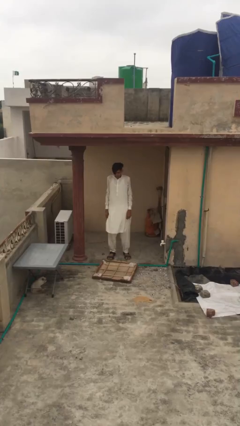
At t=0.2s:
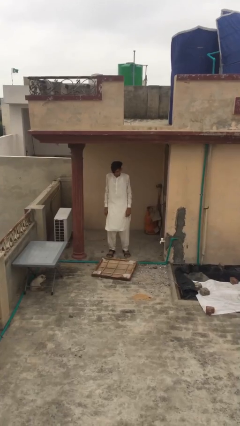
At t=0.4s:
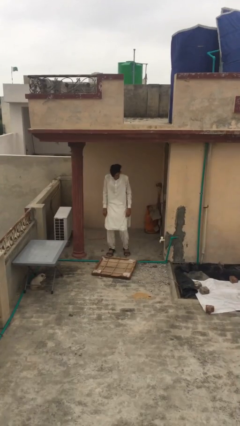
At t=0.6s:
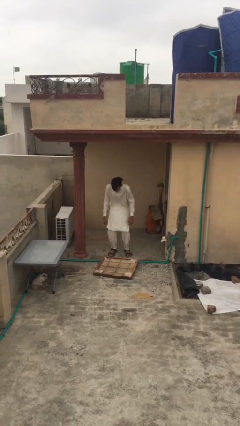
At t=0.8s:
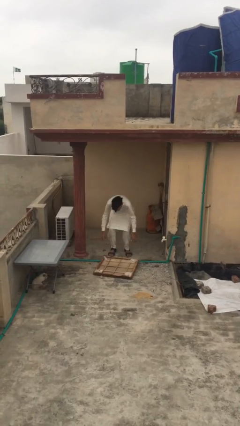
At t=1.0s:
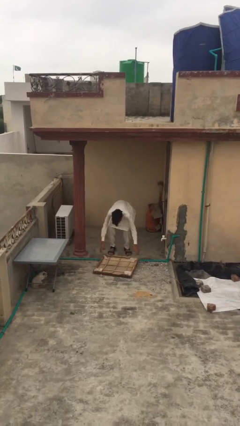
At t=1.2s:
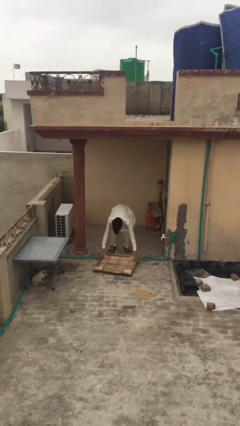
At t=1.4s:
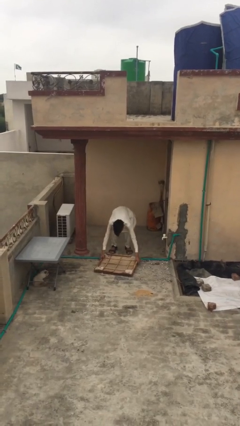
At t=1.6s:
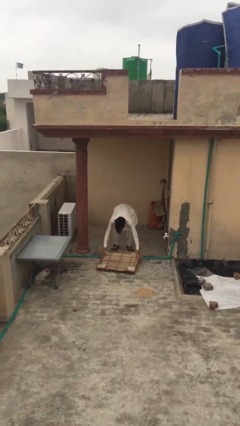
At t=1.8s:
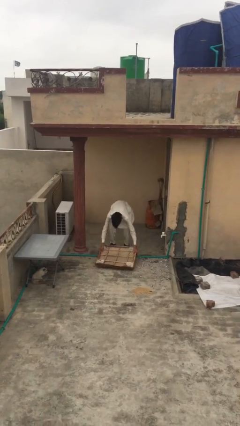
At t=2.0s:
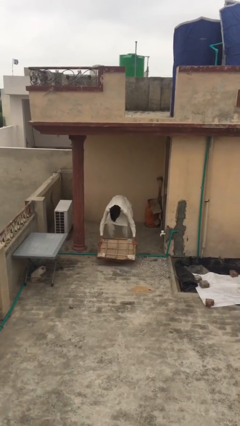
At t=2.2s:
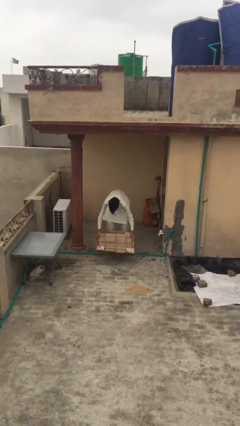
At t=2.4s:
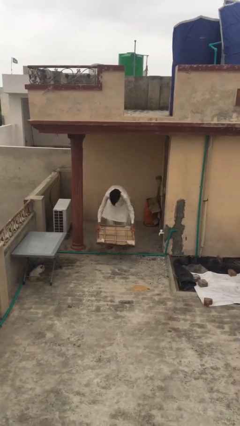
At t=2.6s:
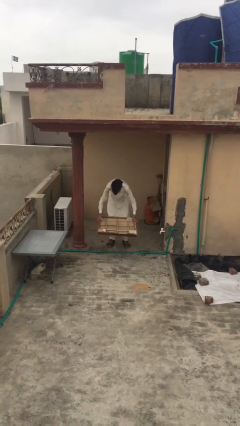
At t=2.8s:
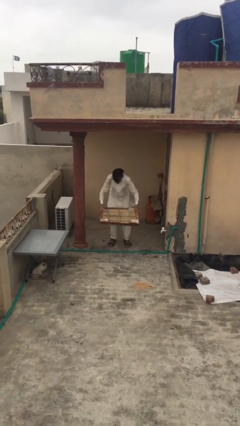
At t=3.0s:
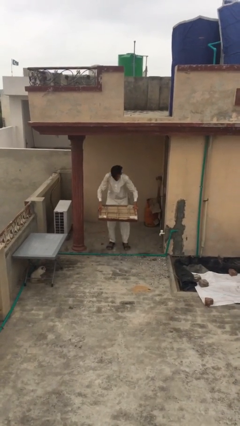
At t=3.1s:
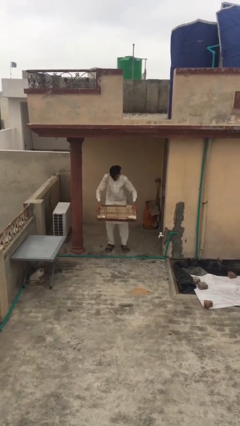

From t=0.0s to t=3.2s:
person picks up object from floor

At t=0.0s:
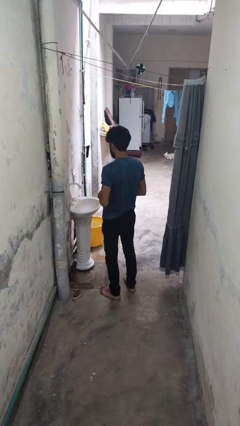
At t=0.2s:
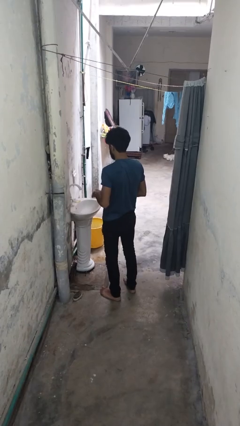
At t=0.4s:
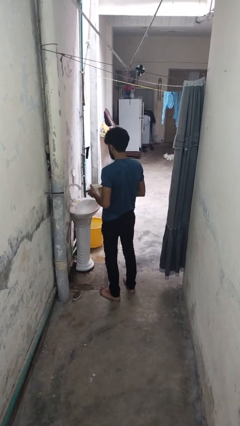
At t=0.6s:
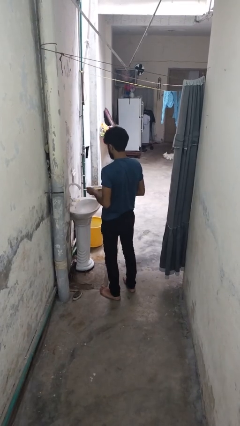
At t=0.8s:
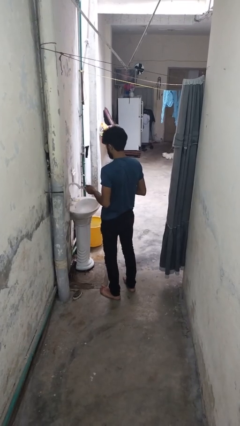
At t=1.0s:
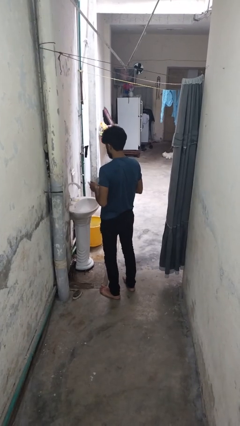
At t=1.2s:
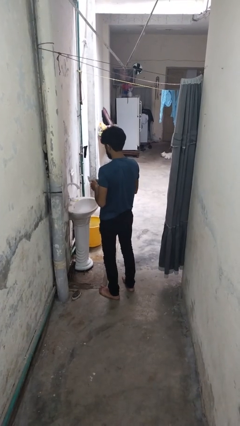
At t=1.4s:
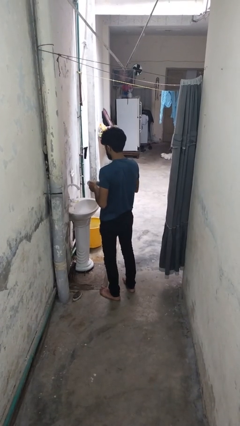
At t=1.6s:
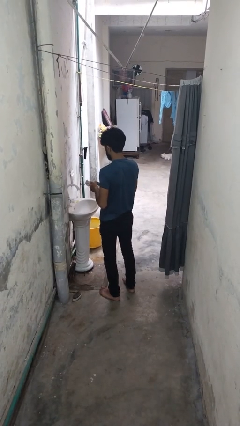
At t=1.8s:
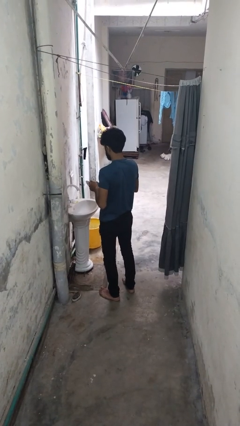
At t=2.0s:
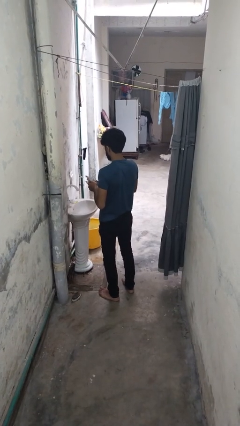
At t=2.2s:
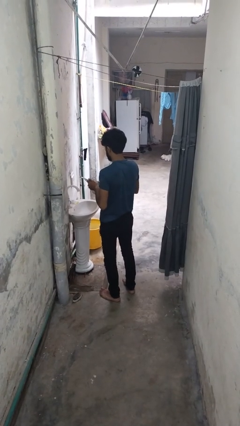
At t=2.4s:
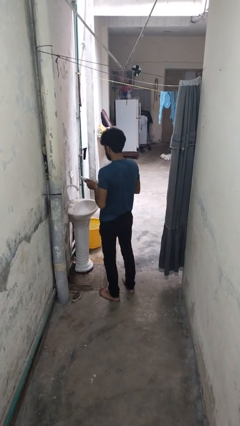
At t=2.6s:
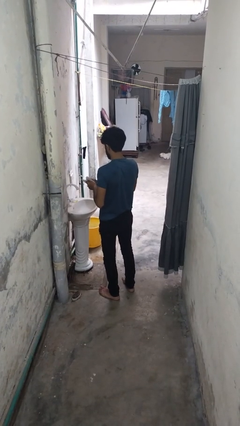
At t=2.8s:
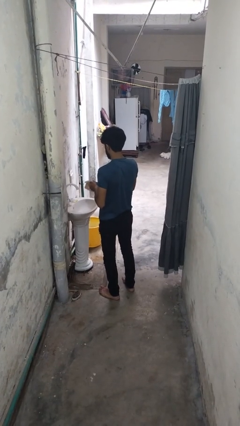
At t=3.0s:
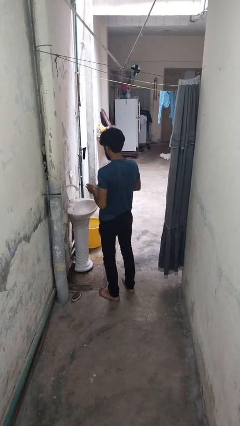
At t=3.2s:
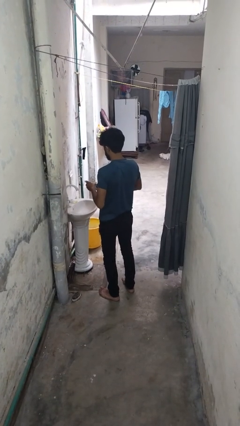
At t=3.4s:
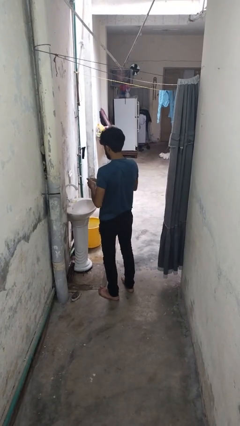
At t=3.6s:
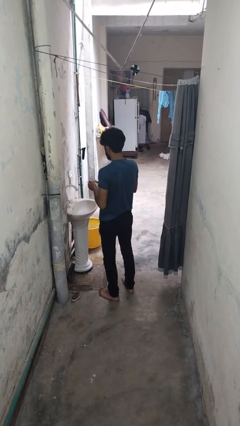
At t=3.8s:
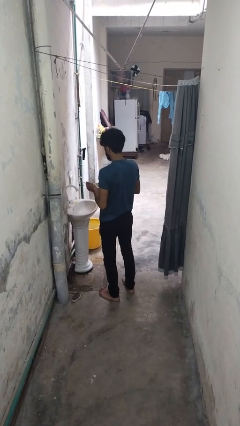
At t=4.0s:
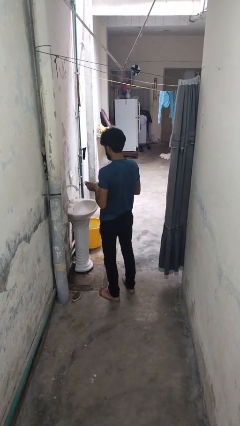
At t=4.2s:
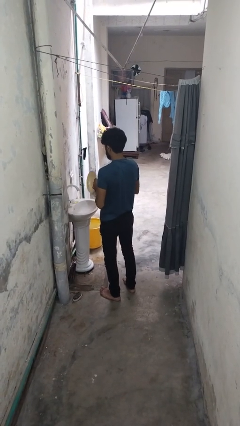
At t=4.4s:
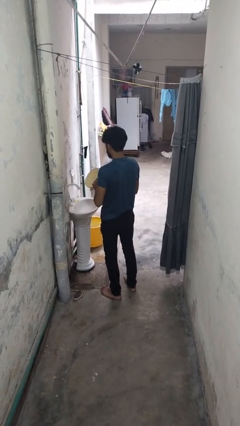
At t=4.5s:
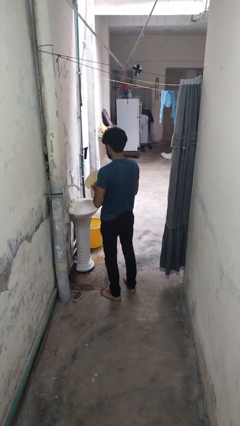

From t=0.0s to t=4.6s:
person dries dish

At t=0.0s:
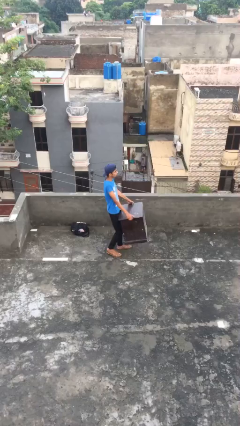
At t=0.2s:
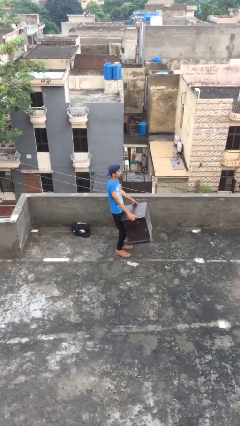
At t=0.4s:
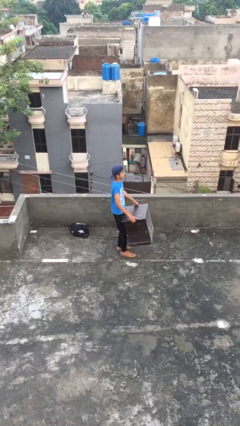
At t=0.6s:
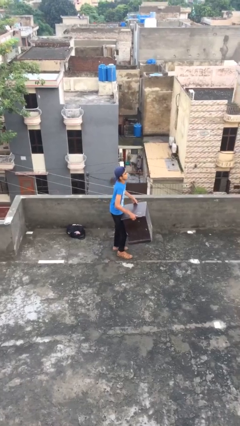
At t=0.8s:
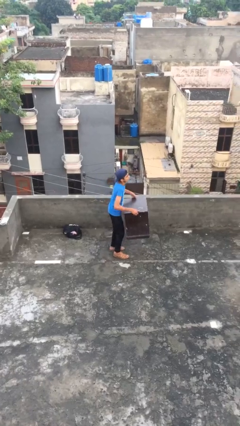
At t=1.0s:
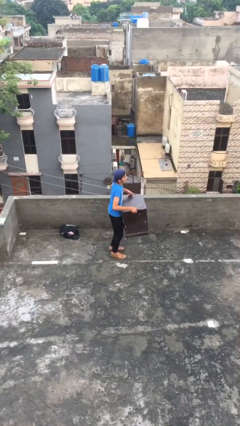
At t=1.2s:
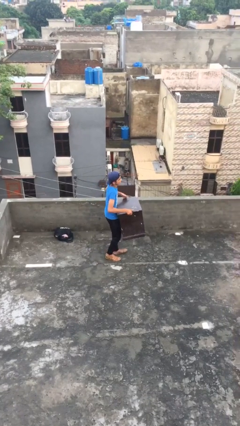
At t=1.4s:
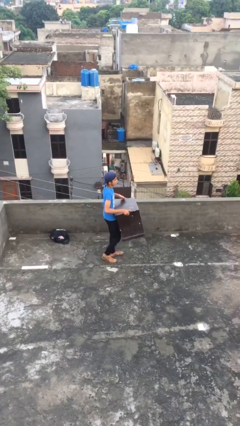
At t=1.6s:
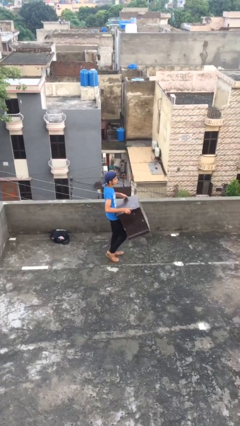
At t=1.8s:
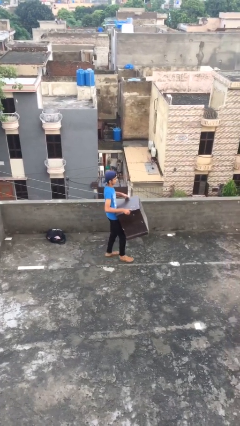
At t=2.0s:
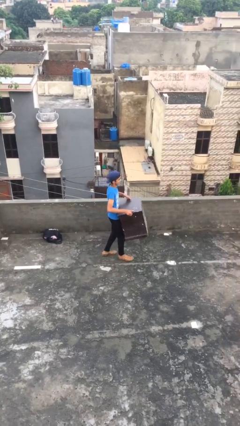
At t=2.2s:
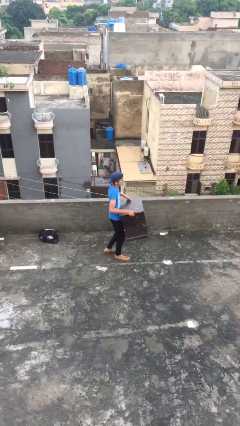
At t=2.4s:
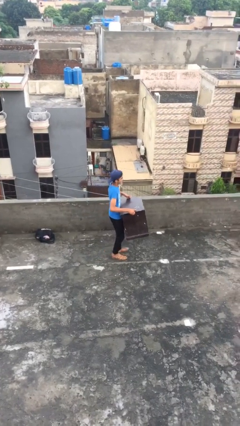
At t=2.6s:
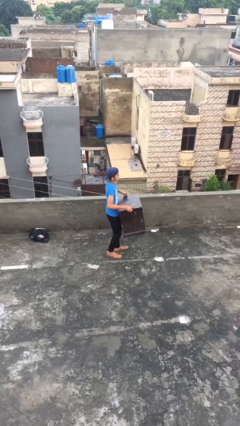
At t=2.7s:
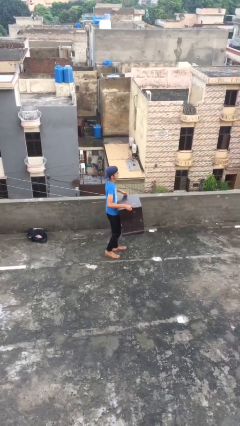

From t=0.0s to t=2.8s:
person carries heavy object

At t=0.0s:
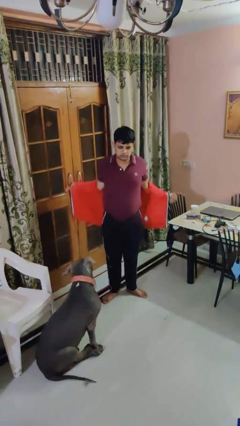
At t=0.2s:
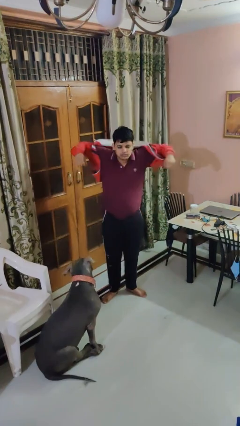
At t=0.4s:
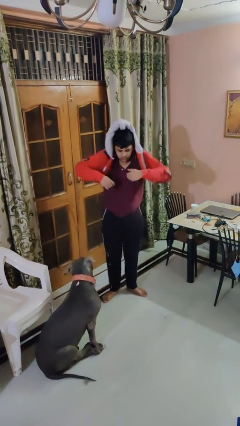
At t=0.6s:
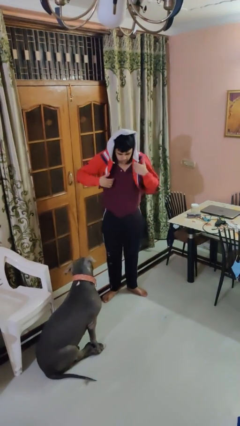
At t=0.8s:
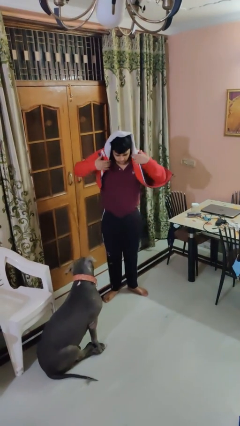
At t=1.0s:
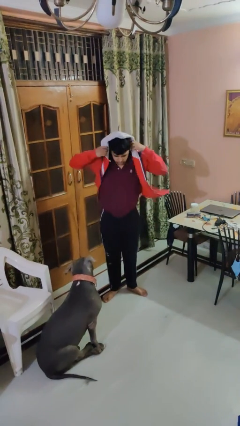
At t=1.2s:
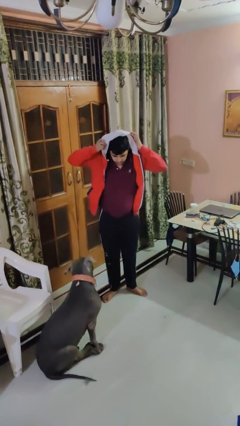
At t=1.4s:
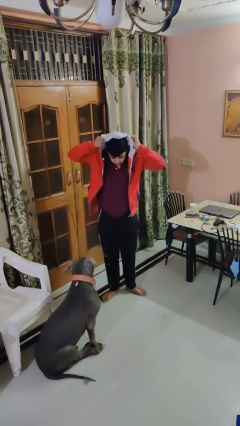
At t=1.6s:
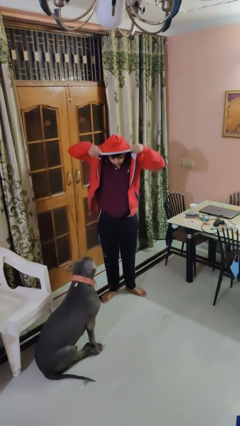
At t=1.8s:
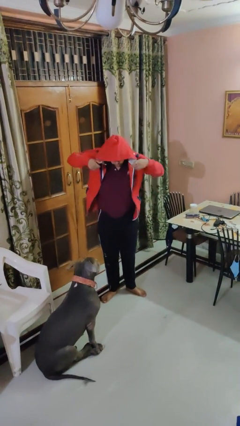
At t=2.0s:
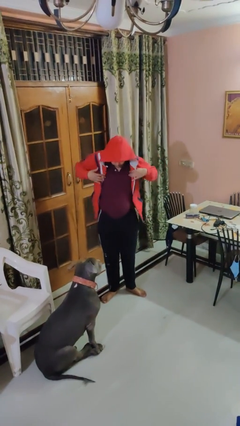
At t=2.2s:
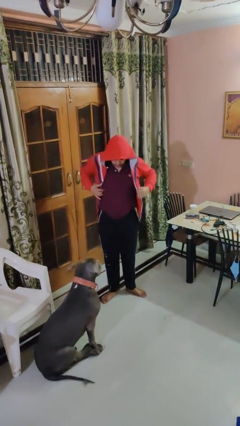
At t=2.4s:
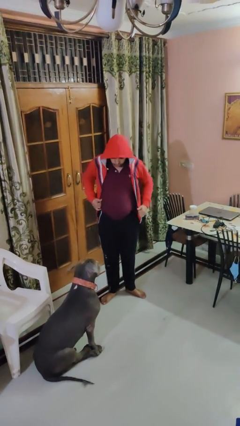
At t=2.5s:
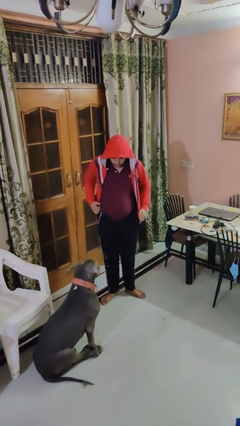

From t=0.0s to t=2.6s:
person puts on hoodie

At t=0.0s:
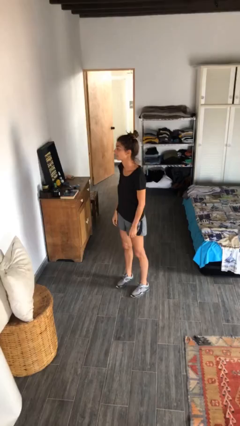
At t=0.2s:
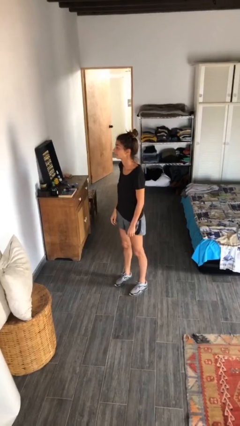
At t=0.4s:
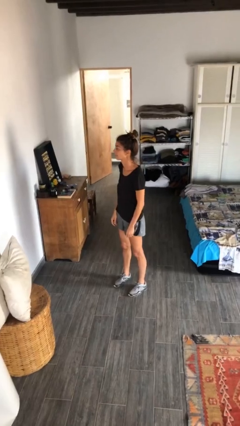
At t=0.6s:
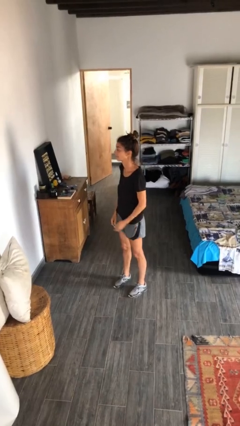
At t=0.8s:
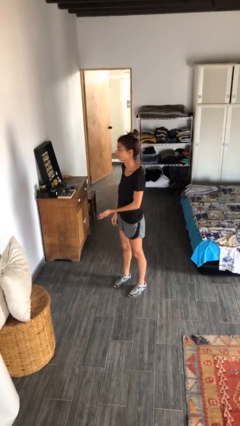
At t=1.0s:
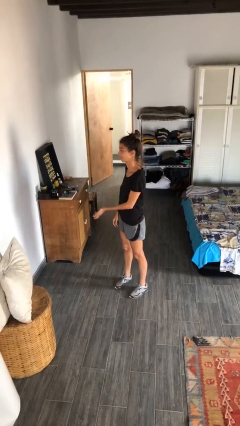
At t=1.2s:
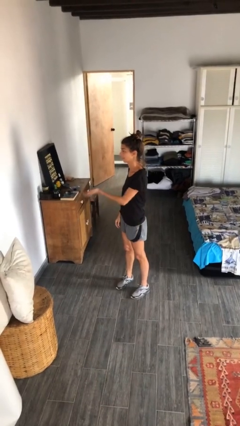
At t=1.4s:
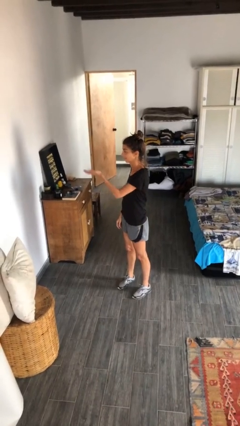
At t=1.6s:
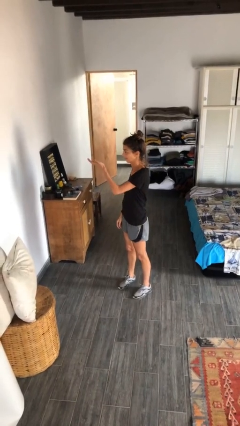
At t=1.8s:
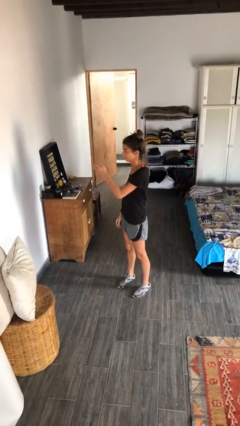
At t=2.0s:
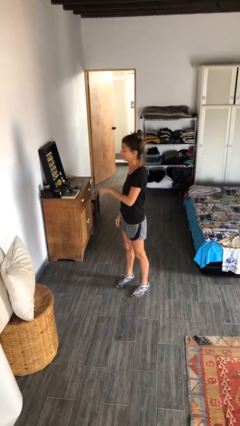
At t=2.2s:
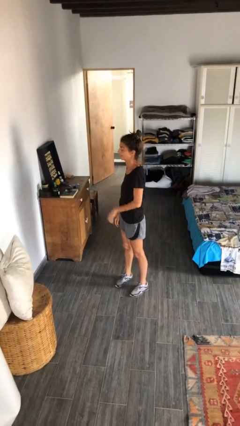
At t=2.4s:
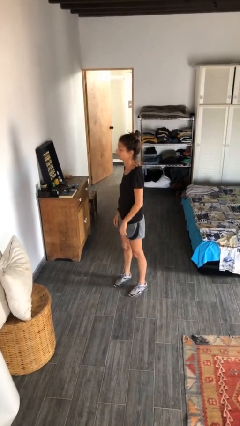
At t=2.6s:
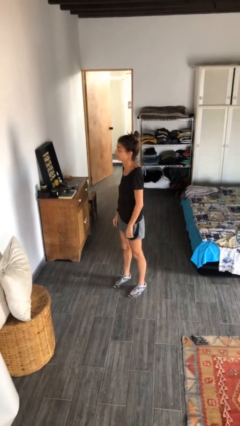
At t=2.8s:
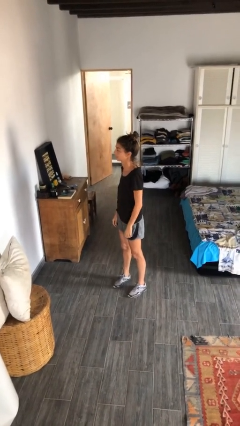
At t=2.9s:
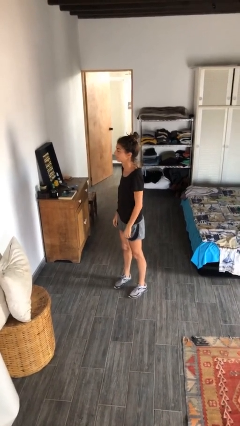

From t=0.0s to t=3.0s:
person gestures swipe up

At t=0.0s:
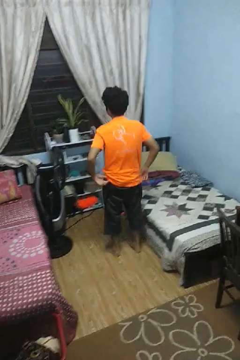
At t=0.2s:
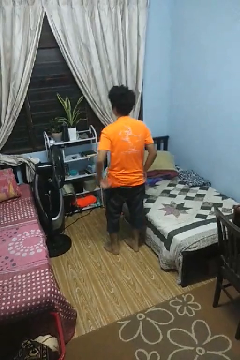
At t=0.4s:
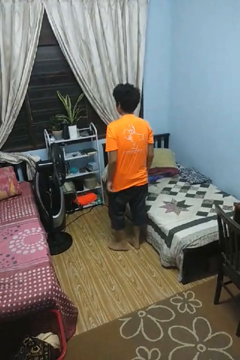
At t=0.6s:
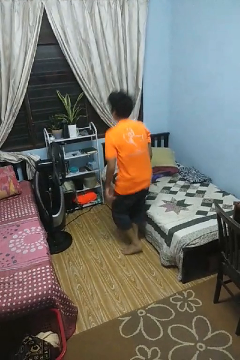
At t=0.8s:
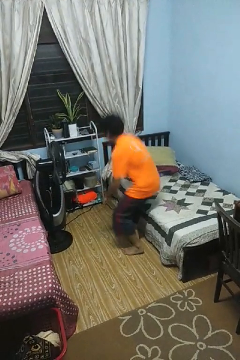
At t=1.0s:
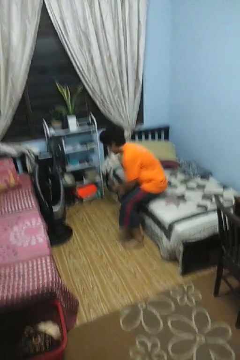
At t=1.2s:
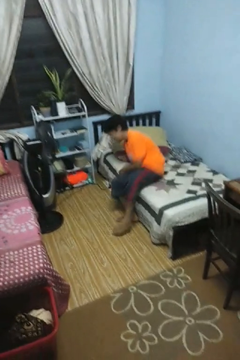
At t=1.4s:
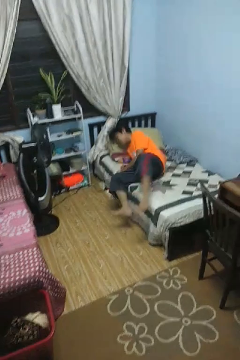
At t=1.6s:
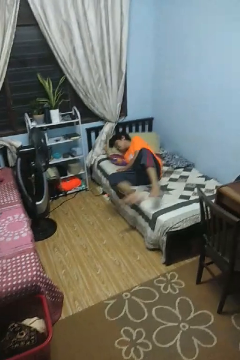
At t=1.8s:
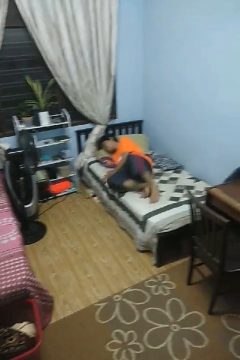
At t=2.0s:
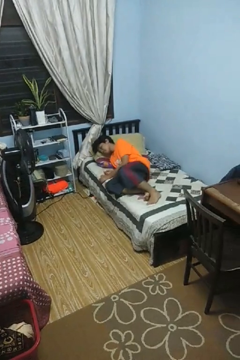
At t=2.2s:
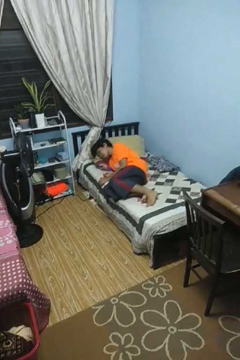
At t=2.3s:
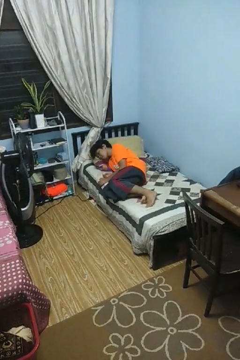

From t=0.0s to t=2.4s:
person lies down on bed
